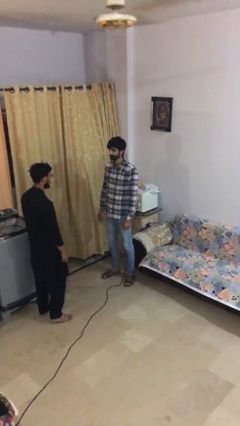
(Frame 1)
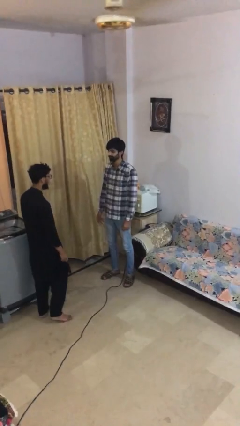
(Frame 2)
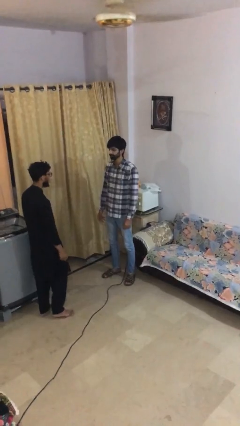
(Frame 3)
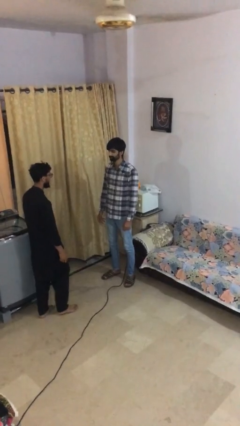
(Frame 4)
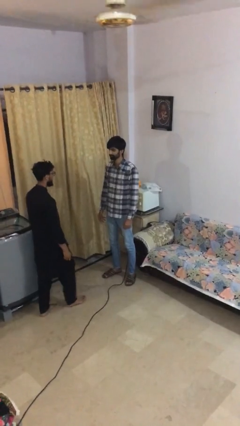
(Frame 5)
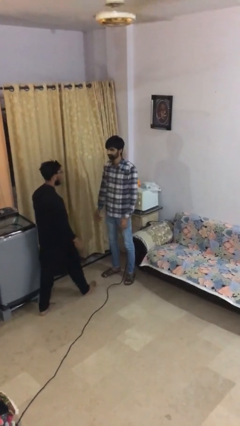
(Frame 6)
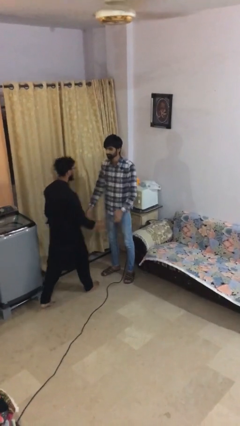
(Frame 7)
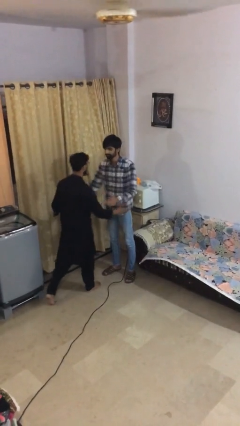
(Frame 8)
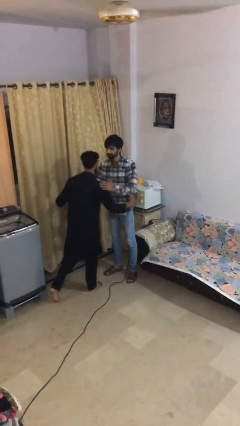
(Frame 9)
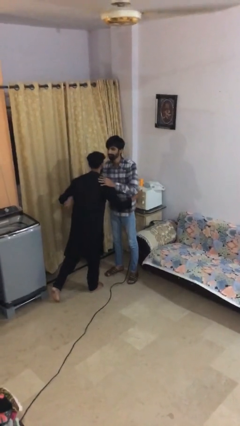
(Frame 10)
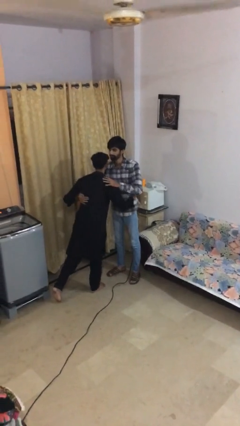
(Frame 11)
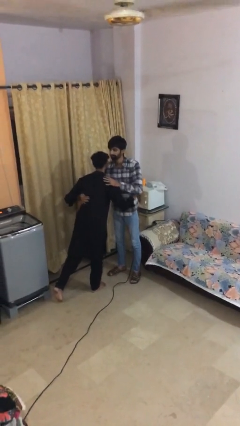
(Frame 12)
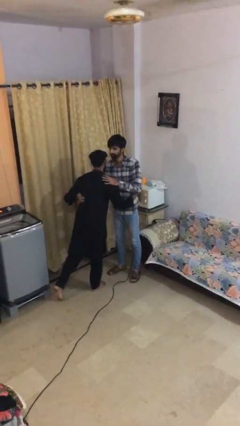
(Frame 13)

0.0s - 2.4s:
person embraces person

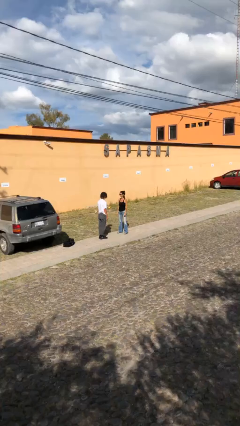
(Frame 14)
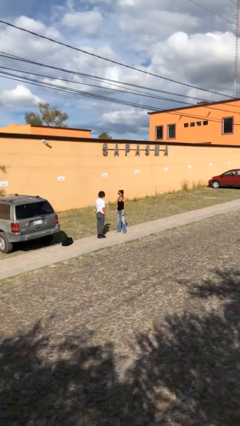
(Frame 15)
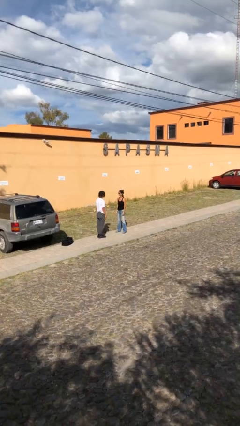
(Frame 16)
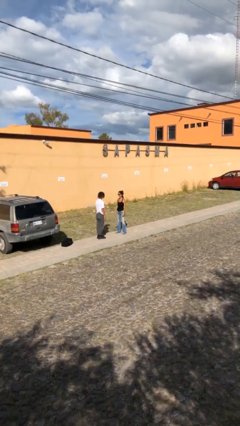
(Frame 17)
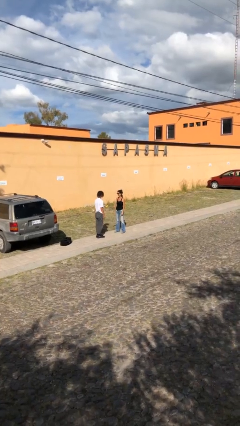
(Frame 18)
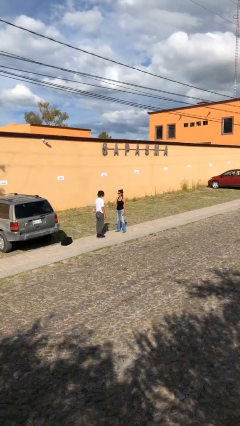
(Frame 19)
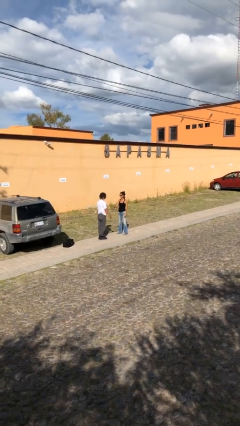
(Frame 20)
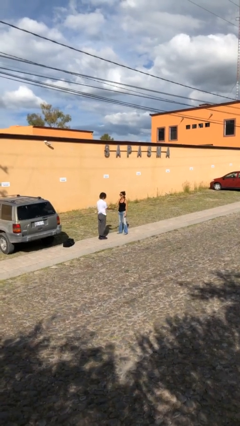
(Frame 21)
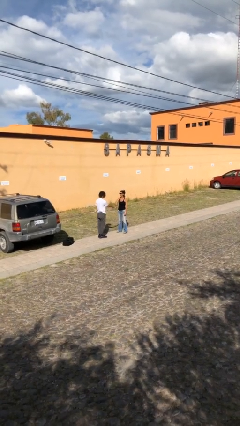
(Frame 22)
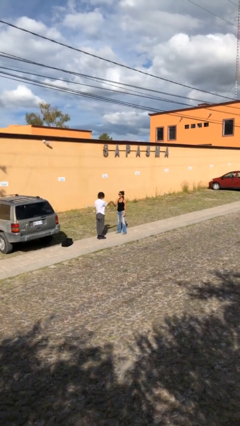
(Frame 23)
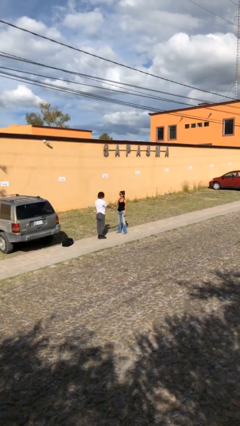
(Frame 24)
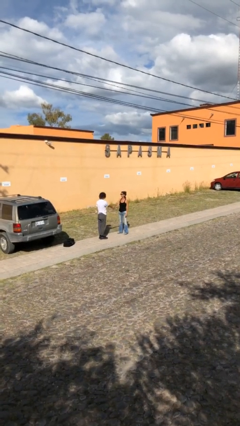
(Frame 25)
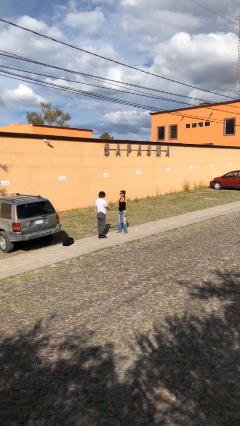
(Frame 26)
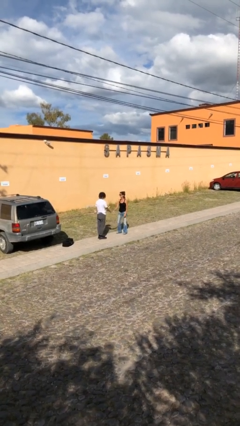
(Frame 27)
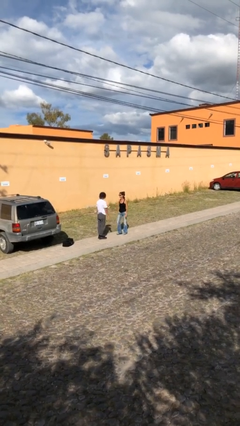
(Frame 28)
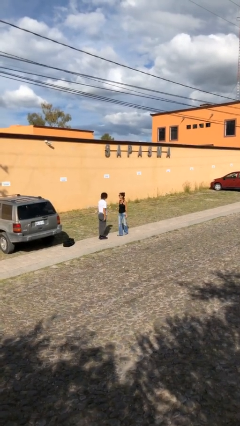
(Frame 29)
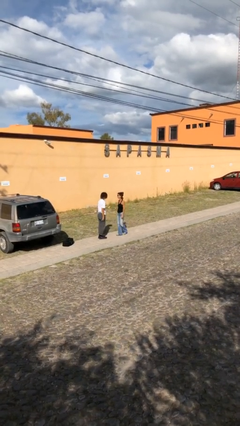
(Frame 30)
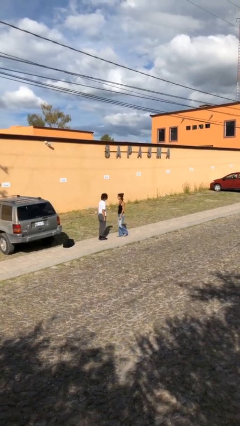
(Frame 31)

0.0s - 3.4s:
person shakes hand

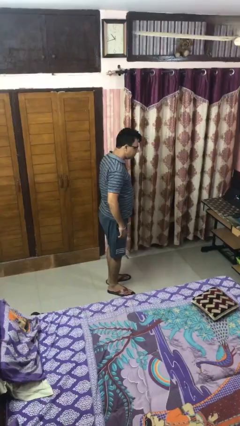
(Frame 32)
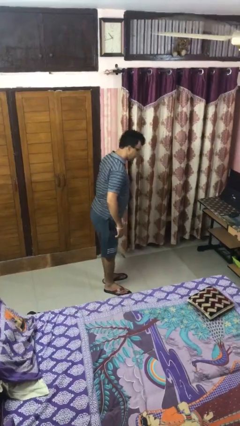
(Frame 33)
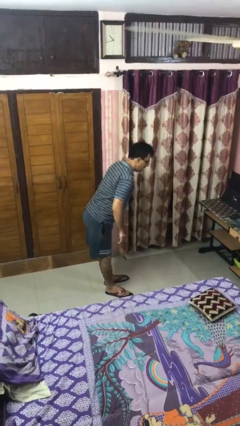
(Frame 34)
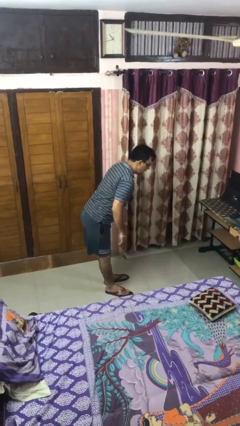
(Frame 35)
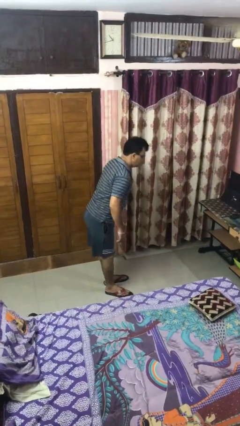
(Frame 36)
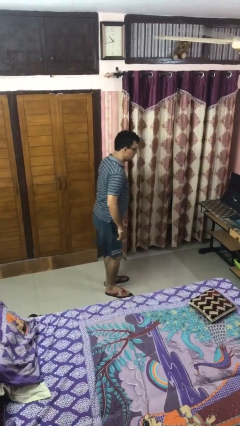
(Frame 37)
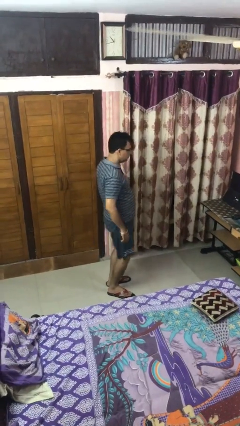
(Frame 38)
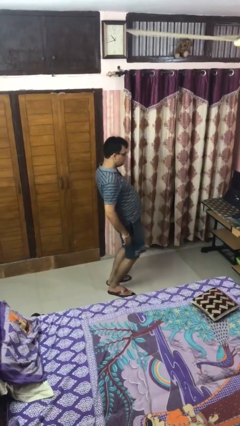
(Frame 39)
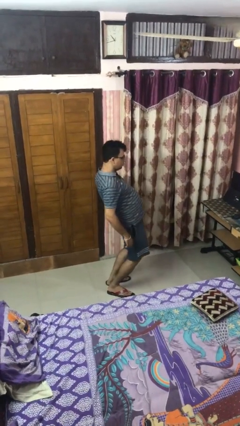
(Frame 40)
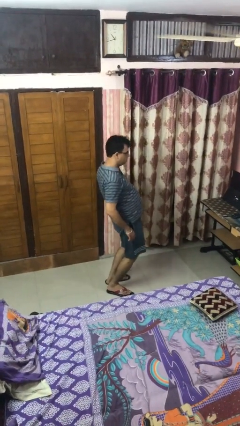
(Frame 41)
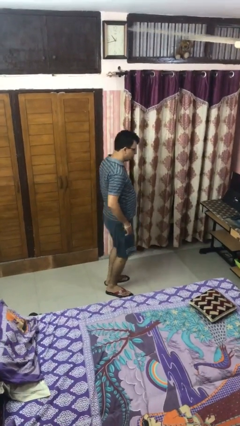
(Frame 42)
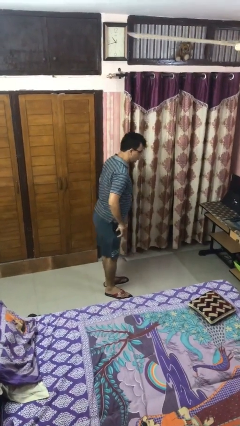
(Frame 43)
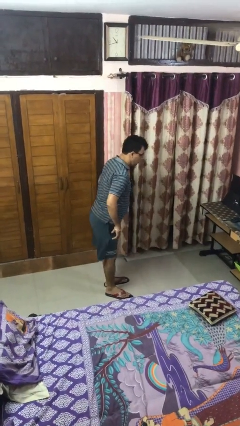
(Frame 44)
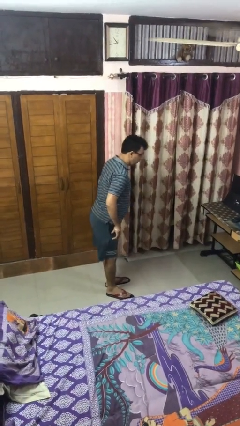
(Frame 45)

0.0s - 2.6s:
person wiggles hips

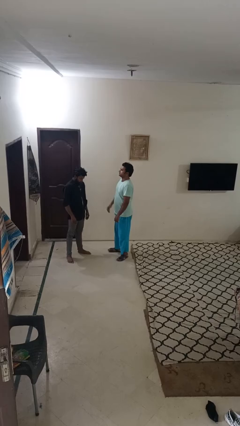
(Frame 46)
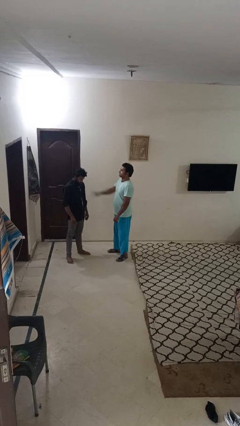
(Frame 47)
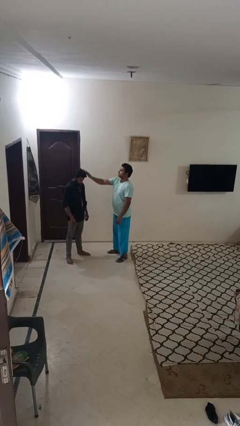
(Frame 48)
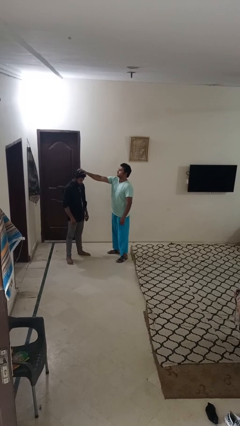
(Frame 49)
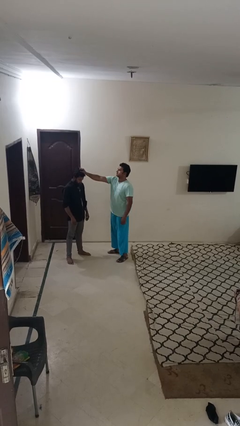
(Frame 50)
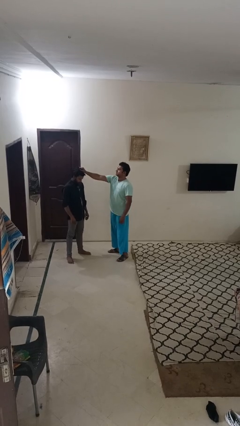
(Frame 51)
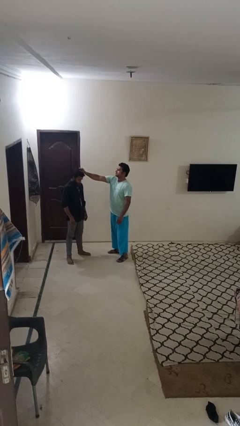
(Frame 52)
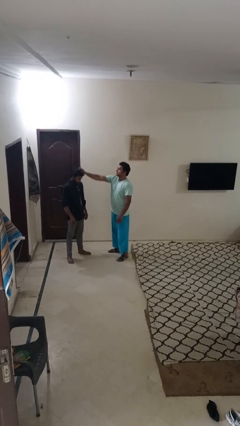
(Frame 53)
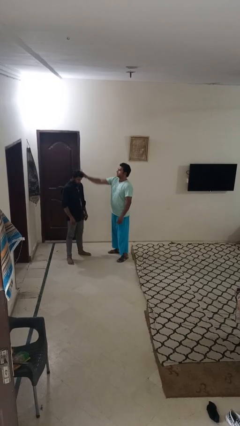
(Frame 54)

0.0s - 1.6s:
person grabs person by hair

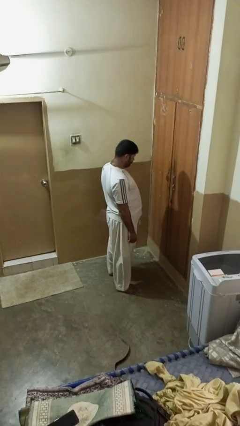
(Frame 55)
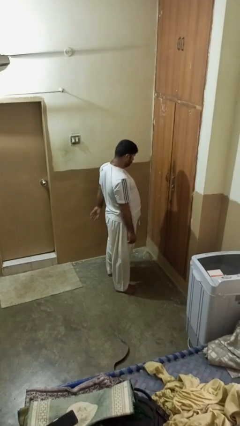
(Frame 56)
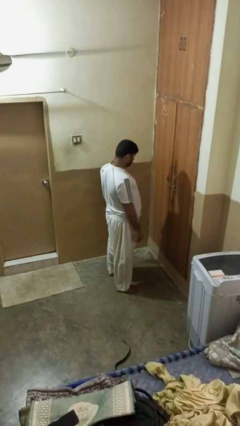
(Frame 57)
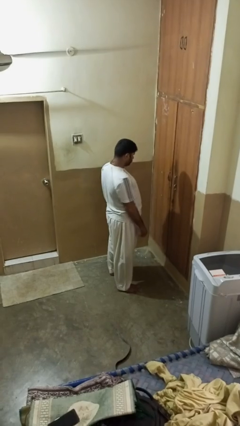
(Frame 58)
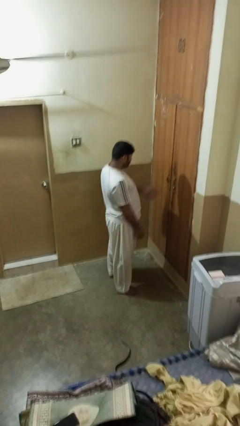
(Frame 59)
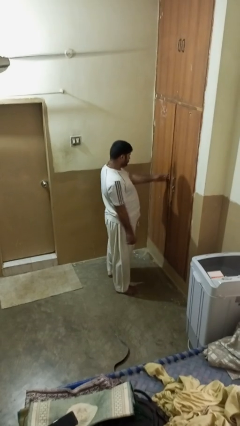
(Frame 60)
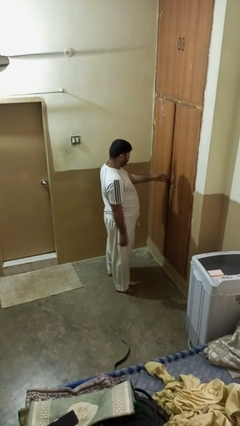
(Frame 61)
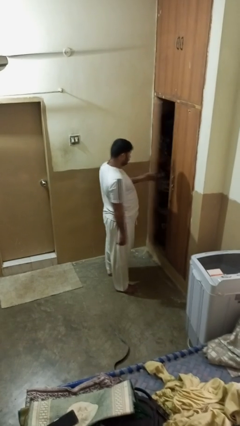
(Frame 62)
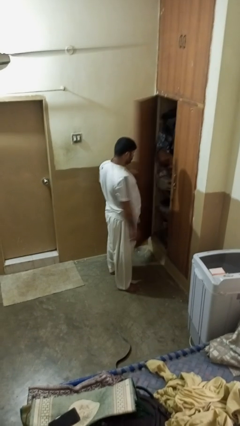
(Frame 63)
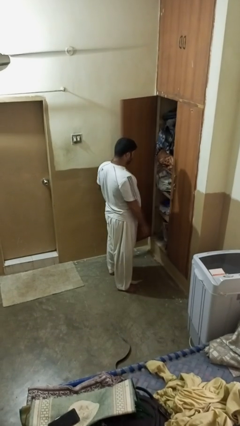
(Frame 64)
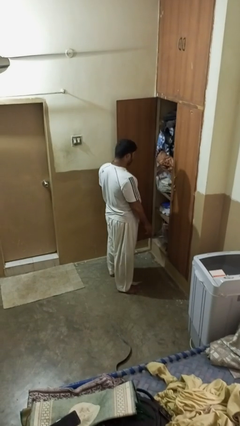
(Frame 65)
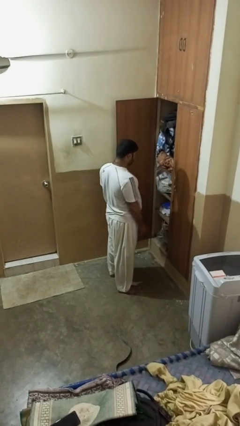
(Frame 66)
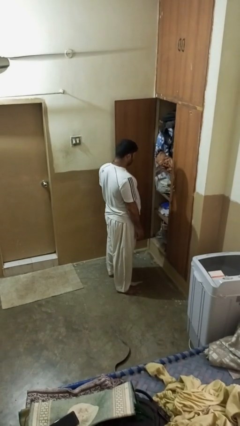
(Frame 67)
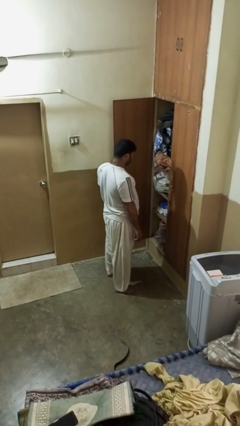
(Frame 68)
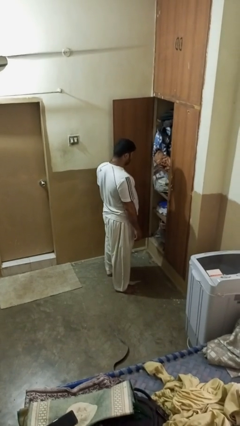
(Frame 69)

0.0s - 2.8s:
person opens closet door

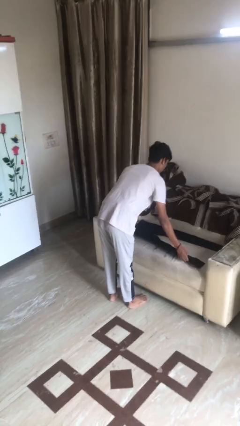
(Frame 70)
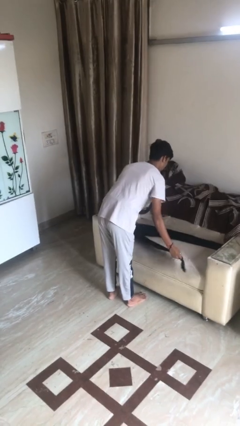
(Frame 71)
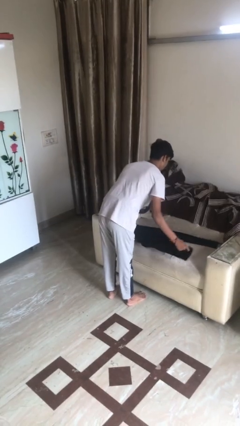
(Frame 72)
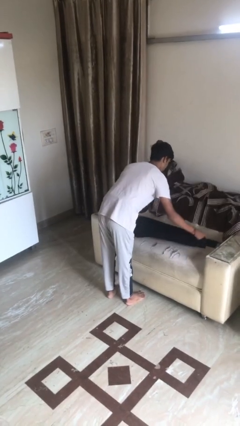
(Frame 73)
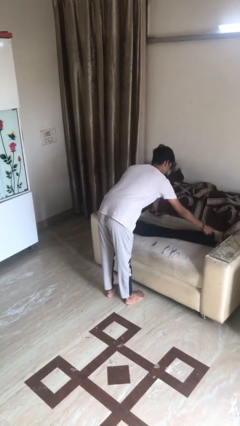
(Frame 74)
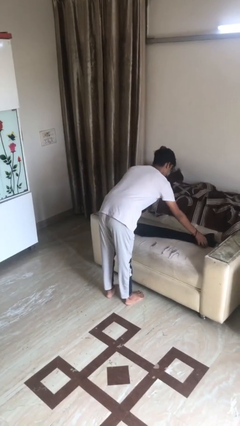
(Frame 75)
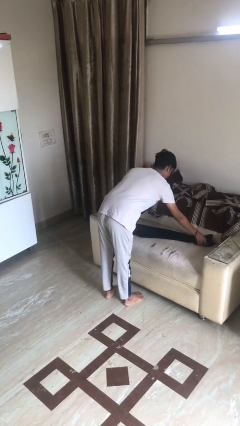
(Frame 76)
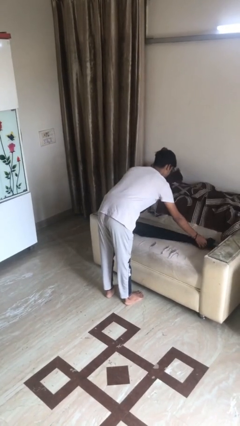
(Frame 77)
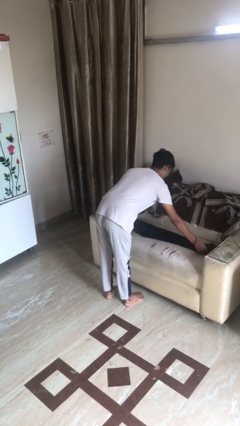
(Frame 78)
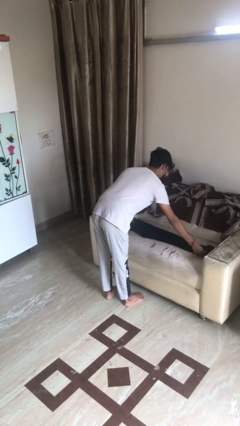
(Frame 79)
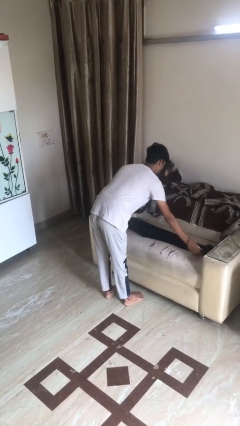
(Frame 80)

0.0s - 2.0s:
person folds pants

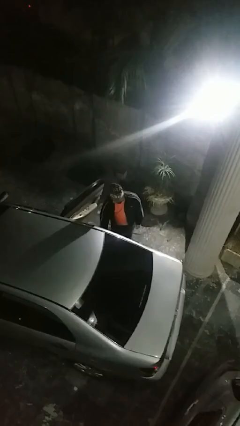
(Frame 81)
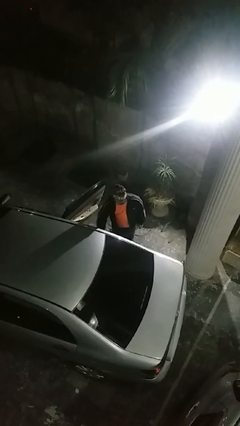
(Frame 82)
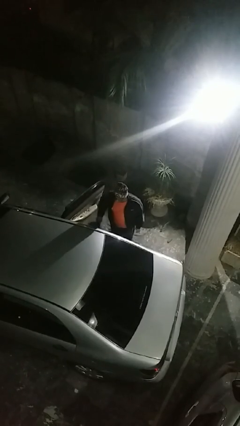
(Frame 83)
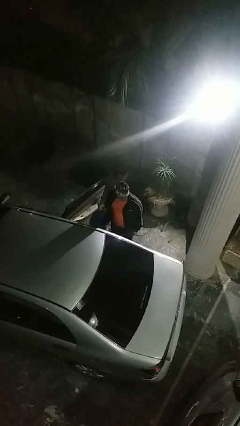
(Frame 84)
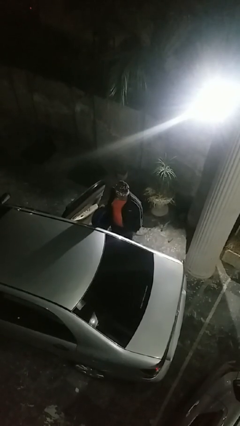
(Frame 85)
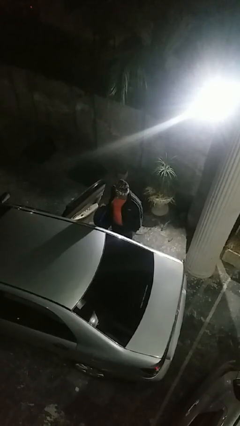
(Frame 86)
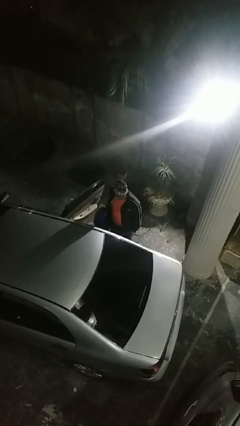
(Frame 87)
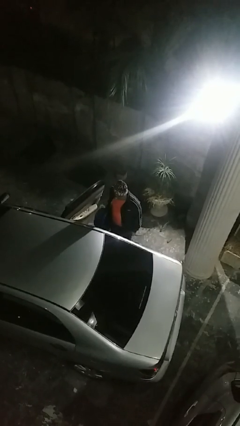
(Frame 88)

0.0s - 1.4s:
person unloads car

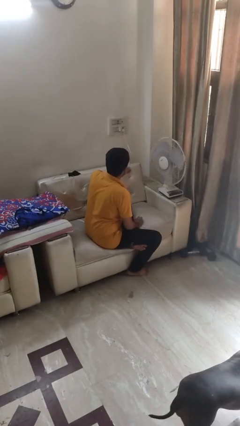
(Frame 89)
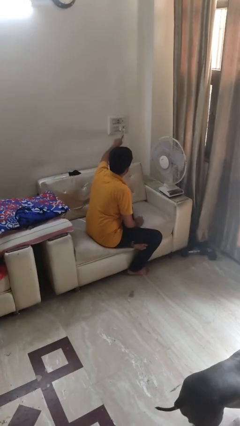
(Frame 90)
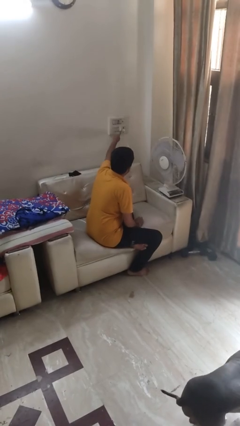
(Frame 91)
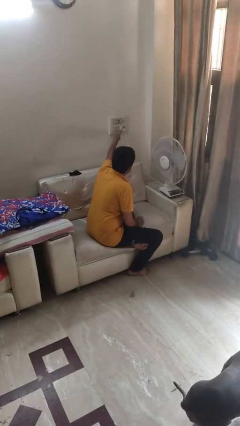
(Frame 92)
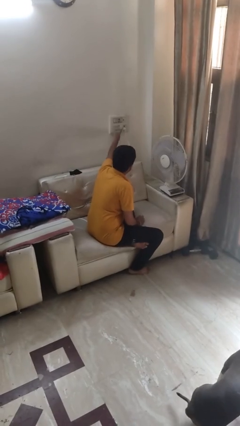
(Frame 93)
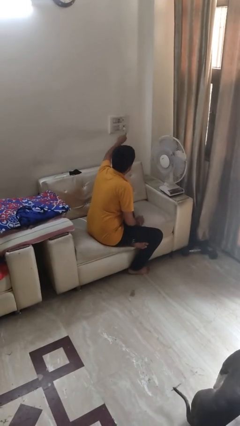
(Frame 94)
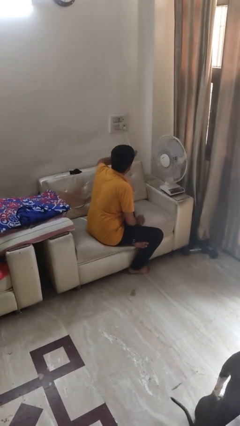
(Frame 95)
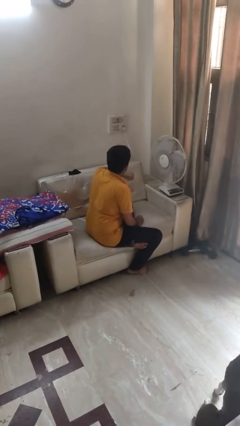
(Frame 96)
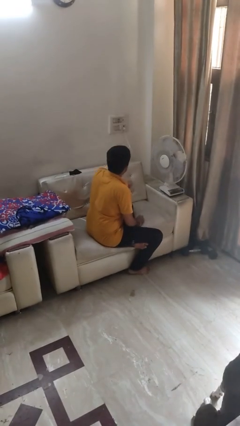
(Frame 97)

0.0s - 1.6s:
person turns on fan
